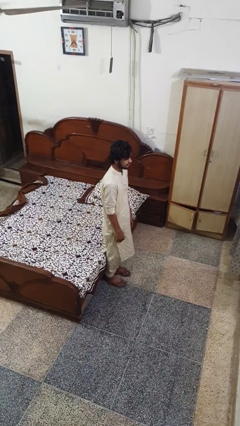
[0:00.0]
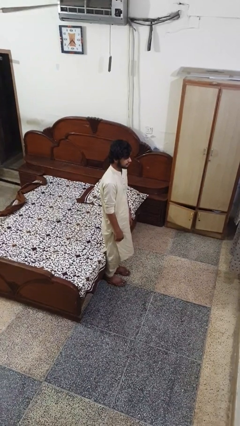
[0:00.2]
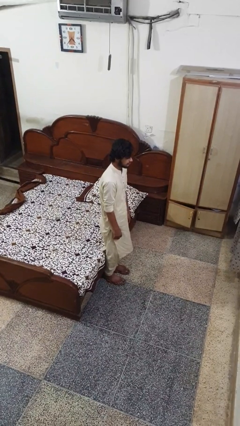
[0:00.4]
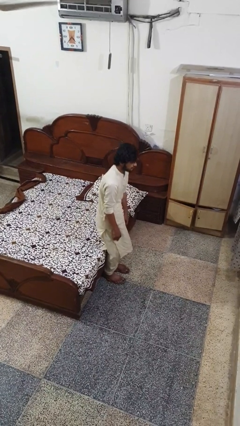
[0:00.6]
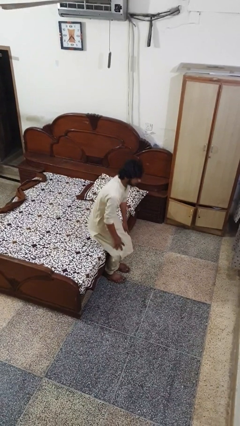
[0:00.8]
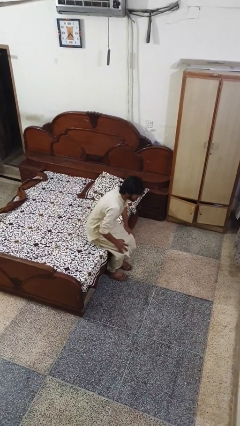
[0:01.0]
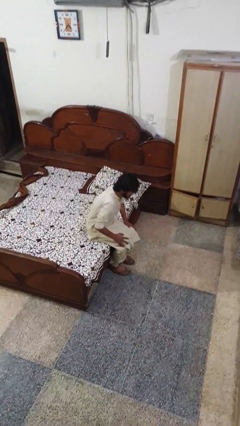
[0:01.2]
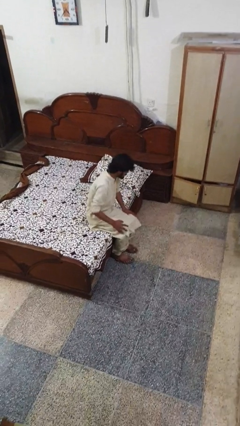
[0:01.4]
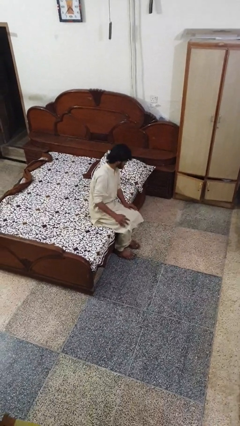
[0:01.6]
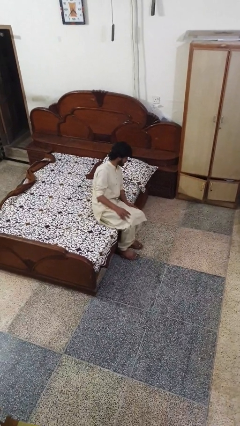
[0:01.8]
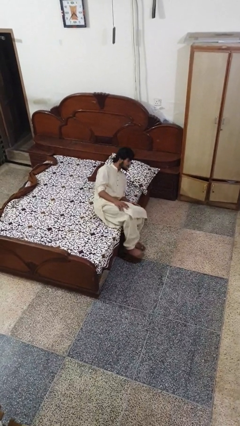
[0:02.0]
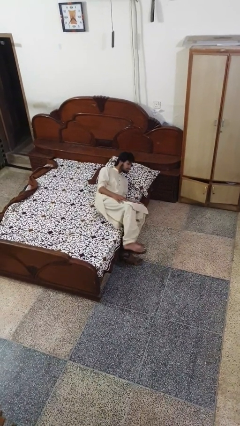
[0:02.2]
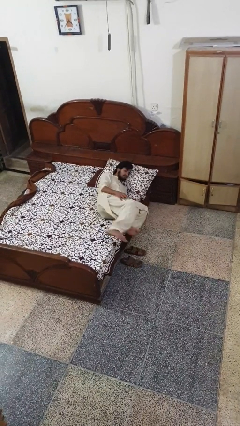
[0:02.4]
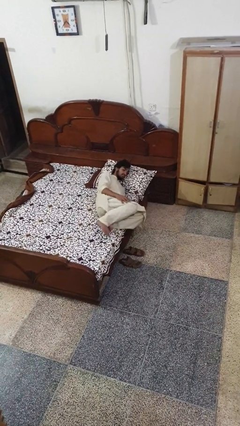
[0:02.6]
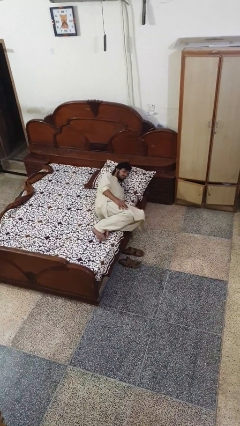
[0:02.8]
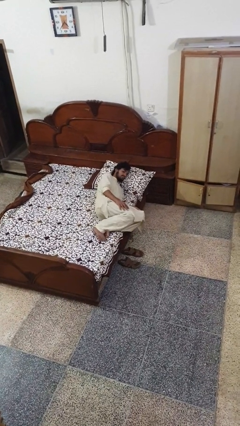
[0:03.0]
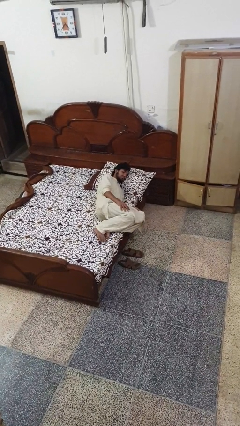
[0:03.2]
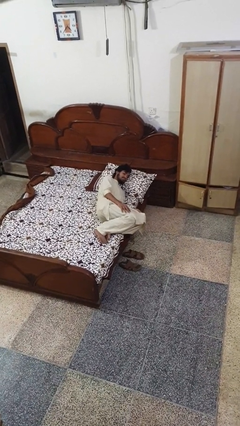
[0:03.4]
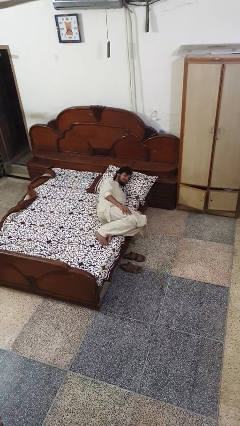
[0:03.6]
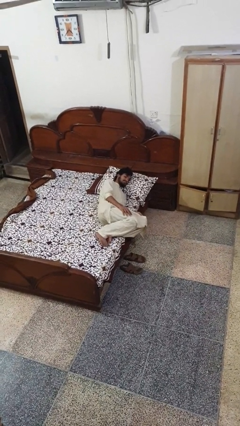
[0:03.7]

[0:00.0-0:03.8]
person lies down on bed

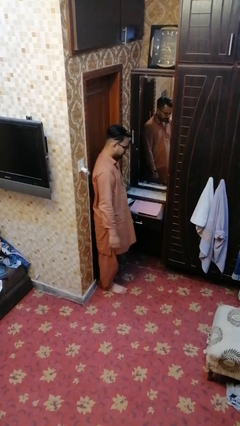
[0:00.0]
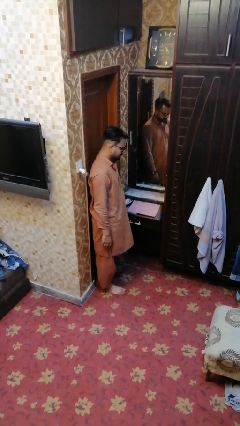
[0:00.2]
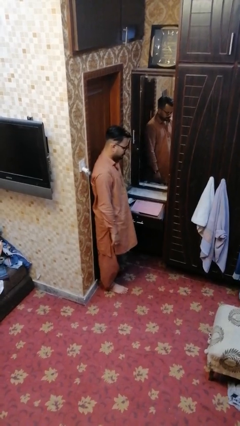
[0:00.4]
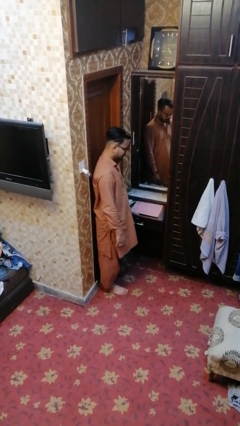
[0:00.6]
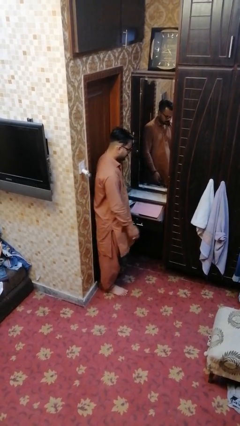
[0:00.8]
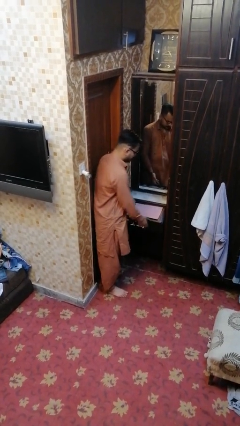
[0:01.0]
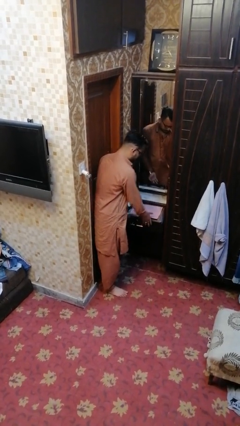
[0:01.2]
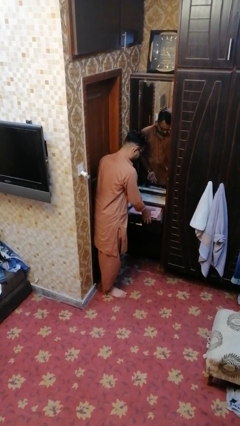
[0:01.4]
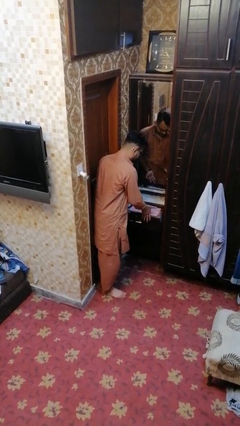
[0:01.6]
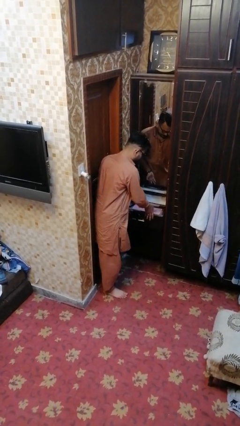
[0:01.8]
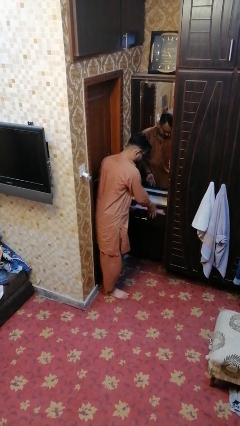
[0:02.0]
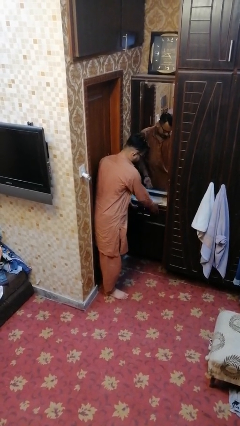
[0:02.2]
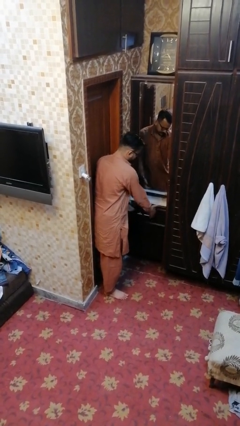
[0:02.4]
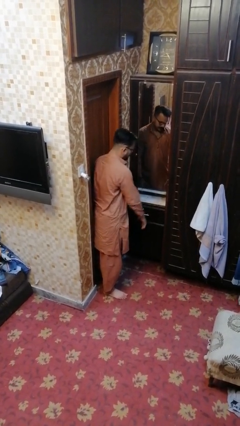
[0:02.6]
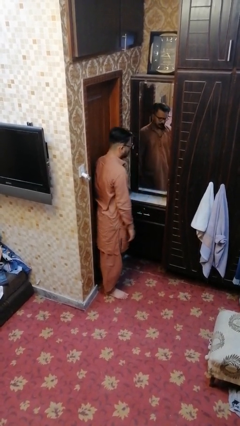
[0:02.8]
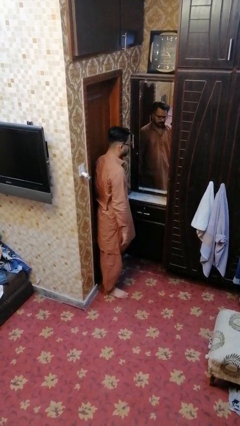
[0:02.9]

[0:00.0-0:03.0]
person closes dresser drawer

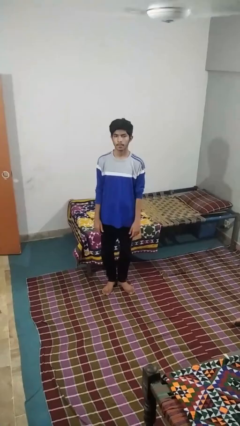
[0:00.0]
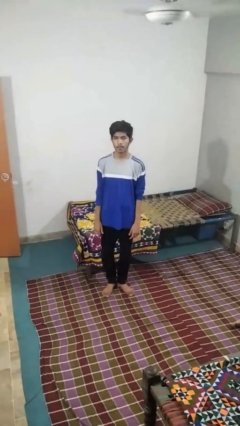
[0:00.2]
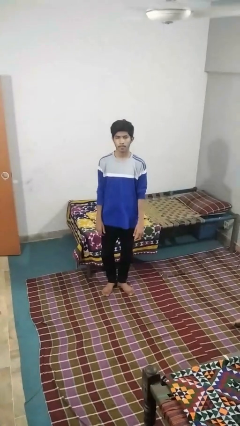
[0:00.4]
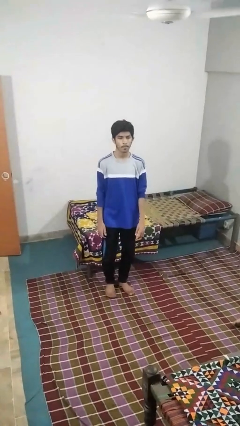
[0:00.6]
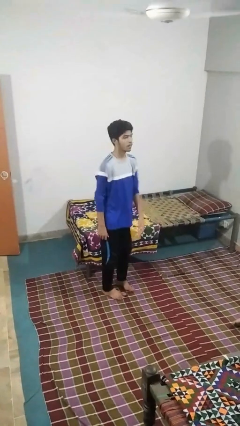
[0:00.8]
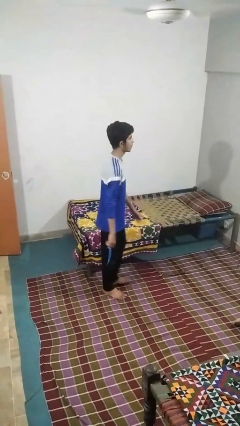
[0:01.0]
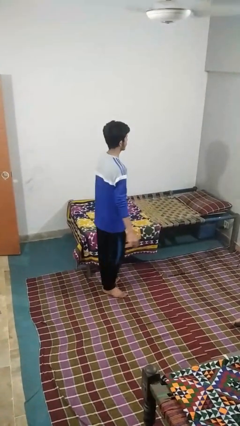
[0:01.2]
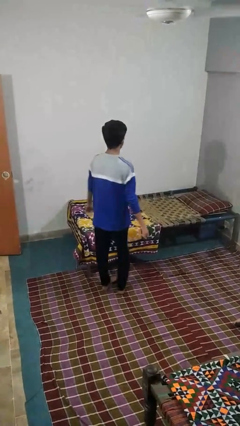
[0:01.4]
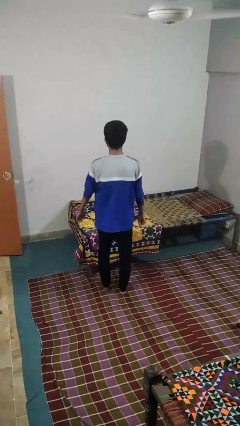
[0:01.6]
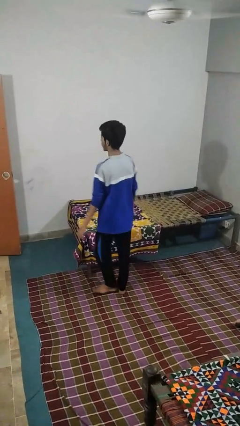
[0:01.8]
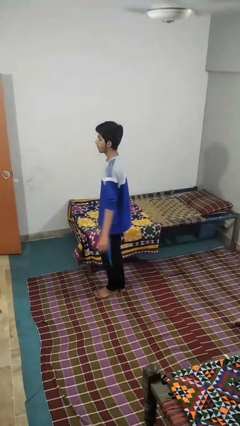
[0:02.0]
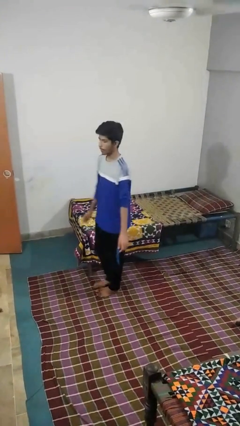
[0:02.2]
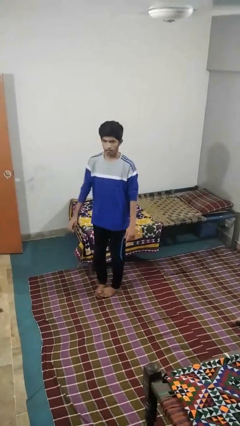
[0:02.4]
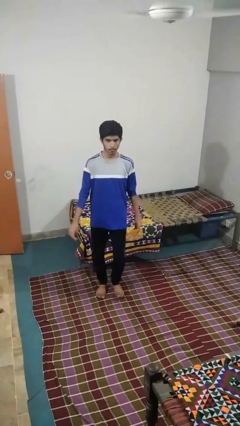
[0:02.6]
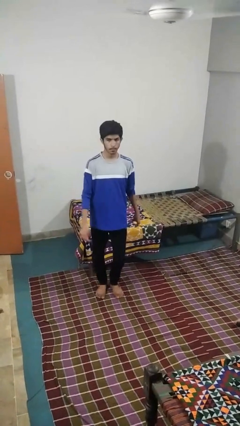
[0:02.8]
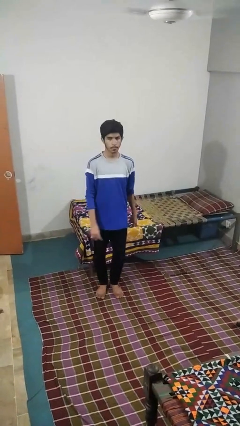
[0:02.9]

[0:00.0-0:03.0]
person twirls

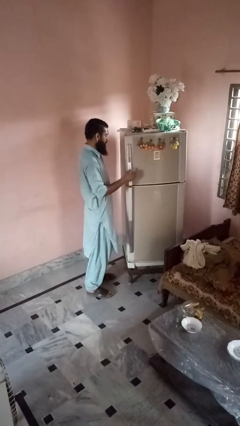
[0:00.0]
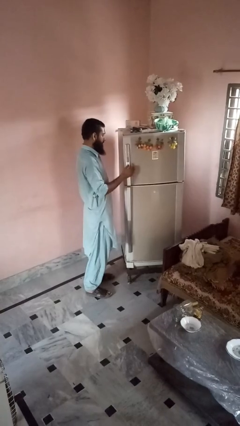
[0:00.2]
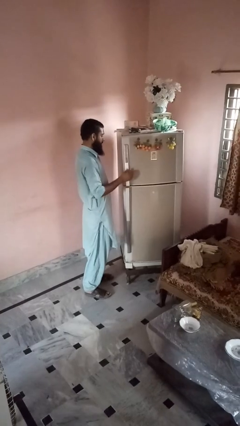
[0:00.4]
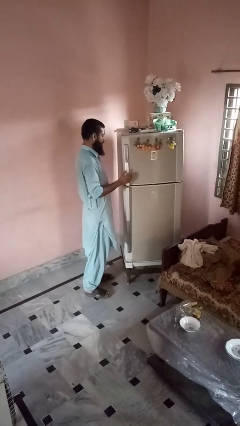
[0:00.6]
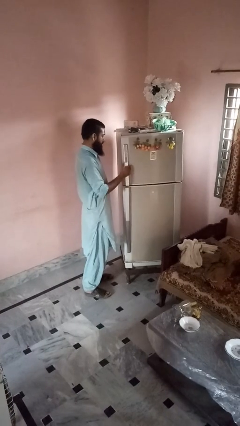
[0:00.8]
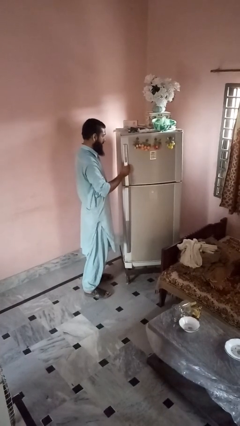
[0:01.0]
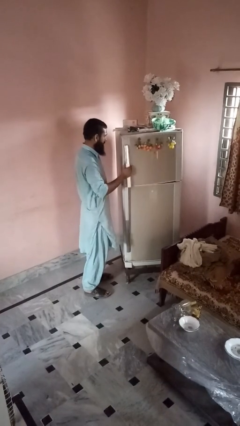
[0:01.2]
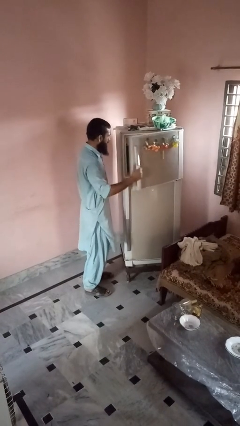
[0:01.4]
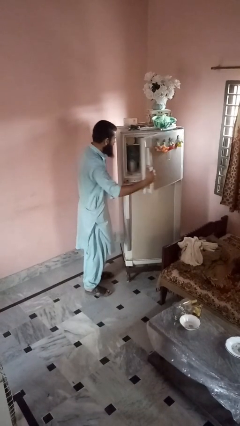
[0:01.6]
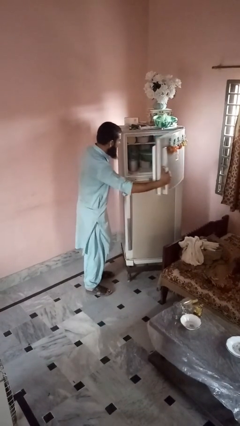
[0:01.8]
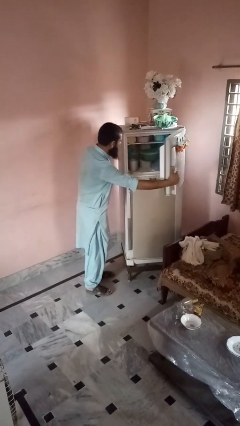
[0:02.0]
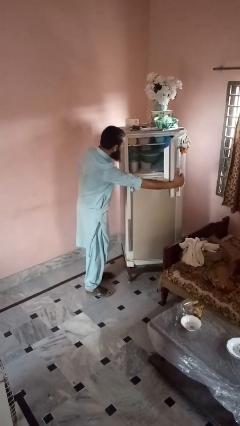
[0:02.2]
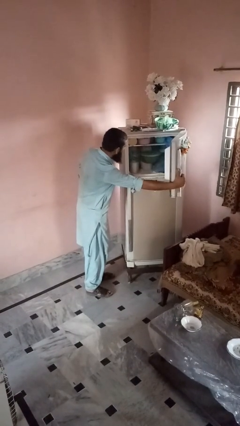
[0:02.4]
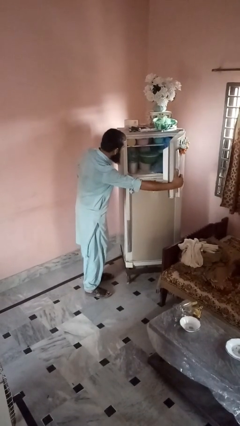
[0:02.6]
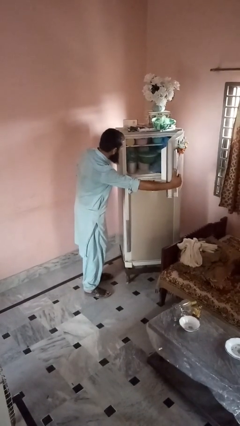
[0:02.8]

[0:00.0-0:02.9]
person opens refrigerator

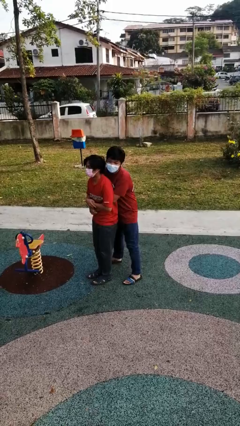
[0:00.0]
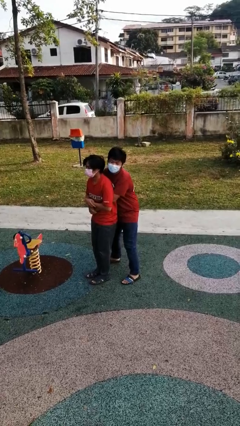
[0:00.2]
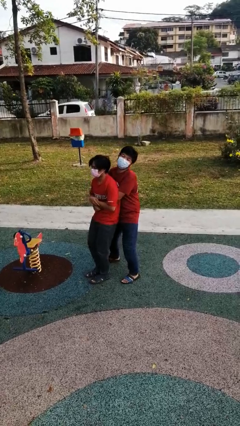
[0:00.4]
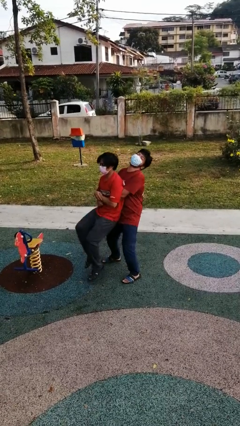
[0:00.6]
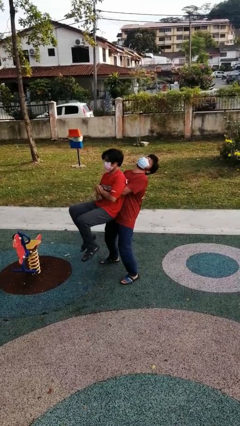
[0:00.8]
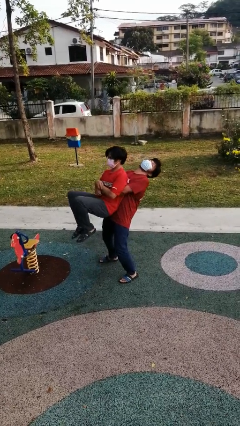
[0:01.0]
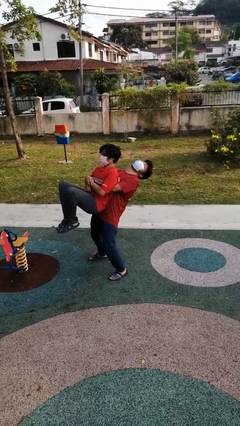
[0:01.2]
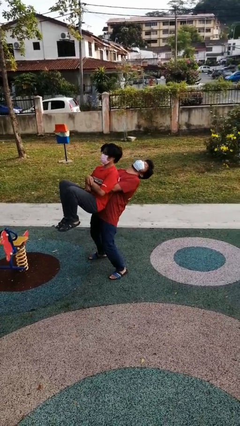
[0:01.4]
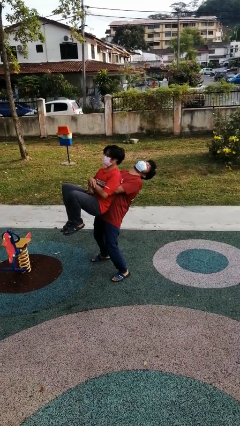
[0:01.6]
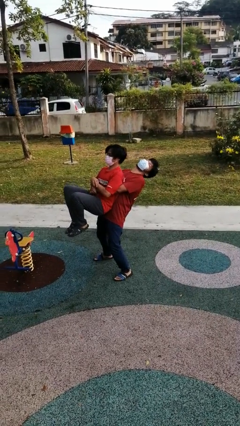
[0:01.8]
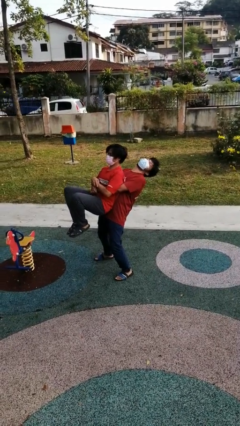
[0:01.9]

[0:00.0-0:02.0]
person picks up person

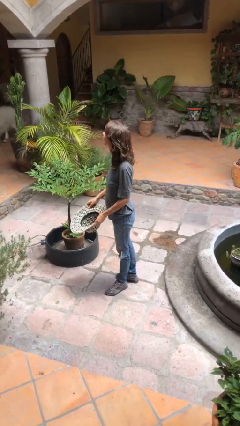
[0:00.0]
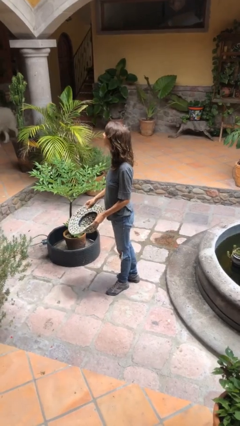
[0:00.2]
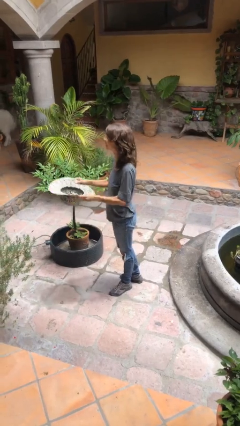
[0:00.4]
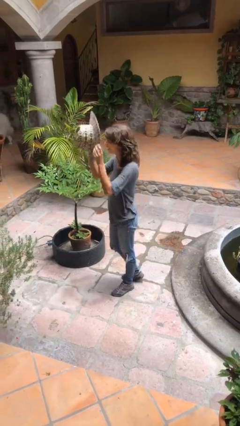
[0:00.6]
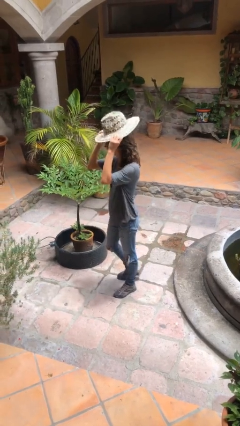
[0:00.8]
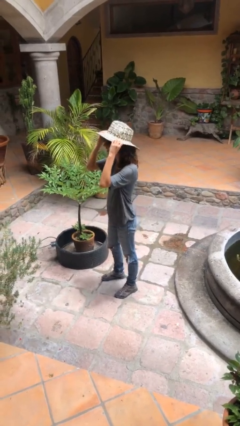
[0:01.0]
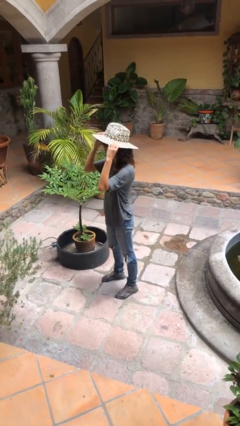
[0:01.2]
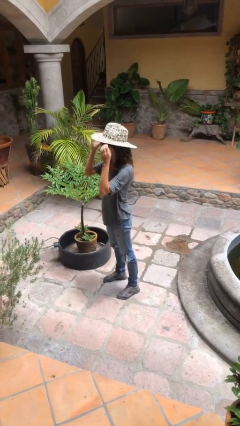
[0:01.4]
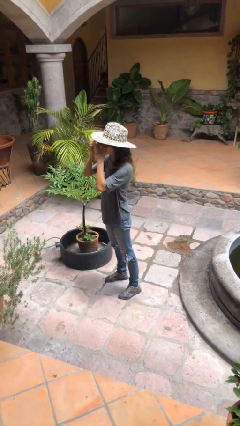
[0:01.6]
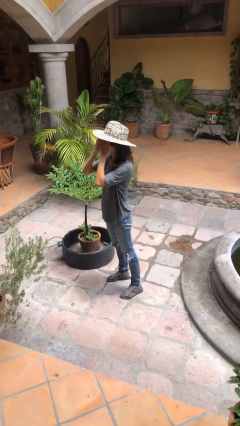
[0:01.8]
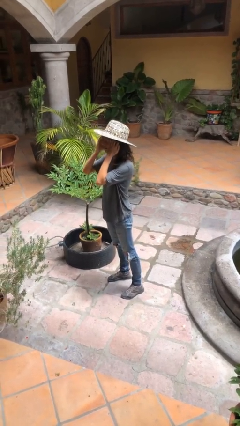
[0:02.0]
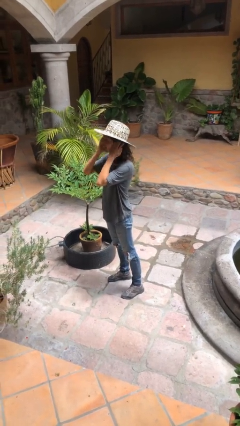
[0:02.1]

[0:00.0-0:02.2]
person puts on hat

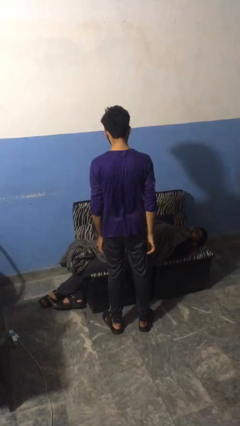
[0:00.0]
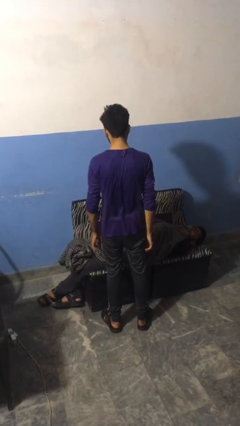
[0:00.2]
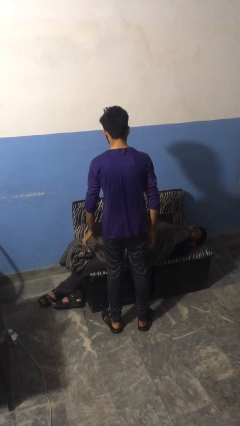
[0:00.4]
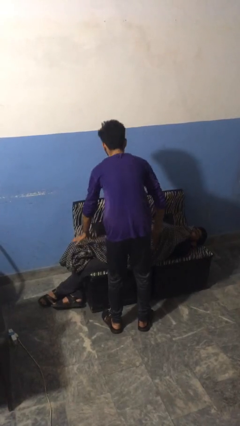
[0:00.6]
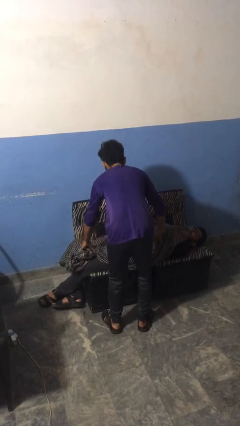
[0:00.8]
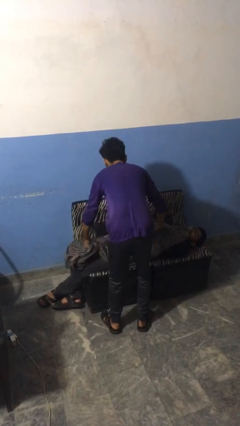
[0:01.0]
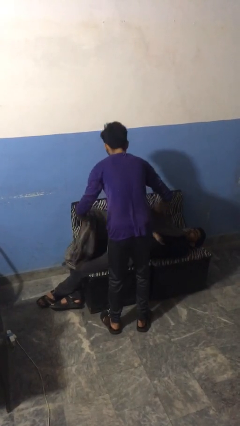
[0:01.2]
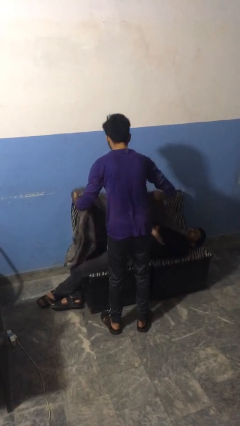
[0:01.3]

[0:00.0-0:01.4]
person uncovers friend with blanket
